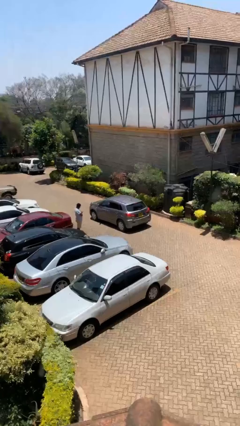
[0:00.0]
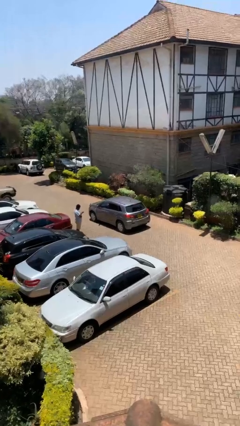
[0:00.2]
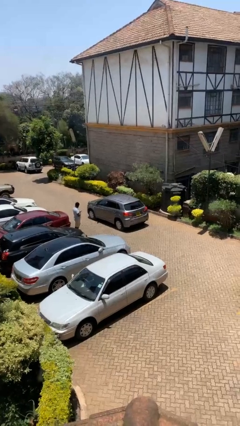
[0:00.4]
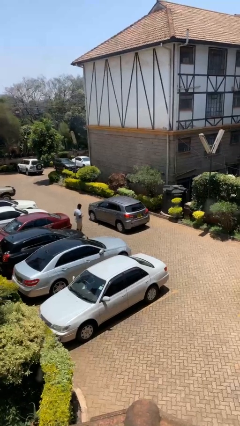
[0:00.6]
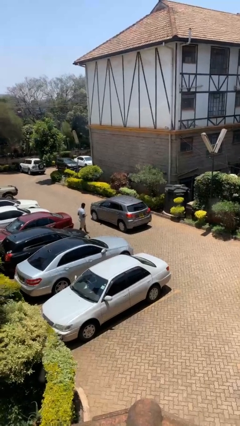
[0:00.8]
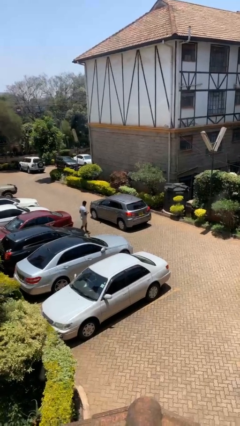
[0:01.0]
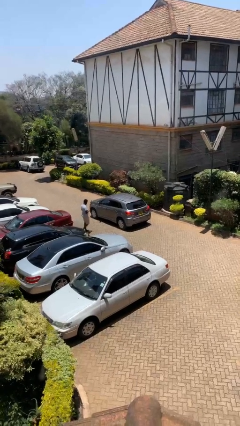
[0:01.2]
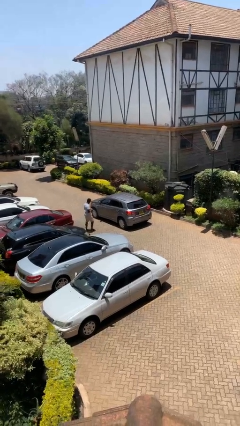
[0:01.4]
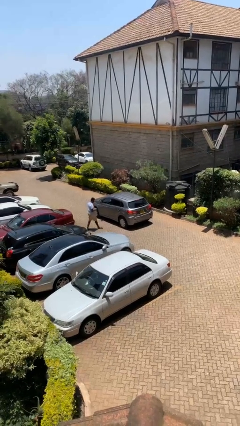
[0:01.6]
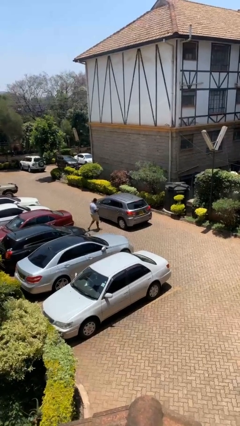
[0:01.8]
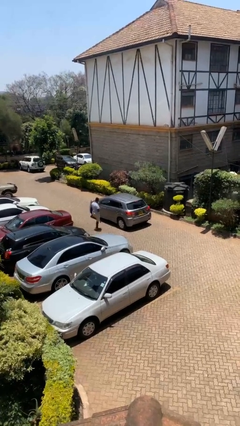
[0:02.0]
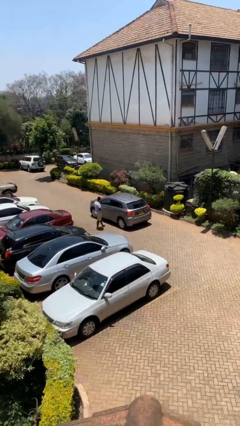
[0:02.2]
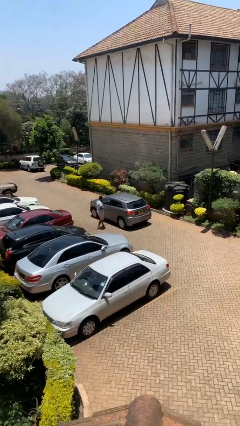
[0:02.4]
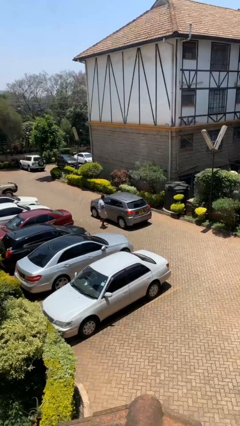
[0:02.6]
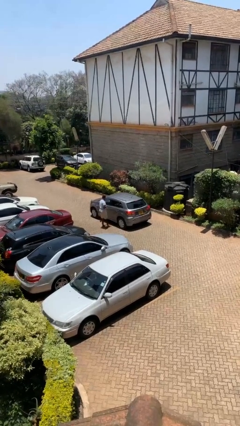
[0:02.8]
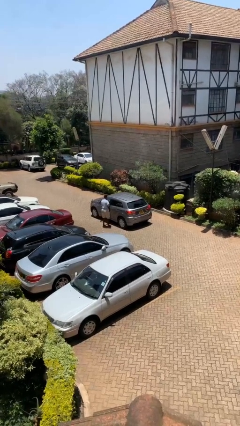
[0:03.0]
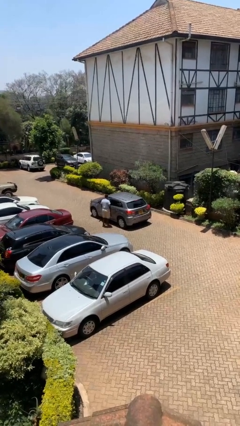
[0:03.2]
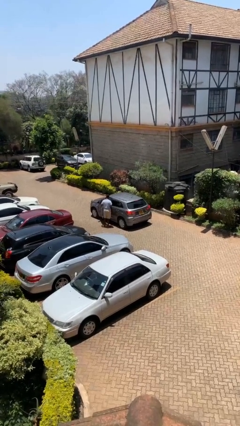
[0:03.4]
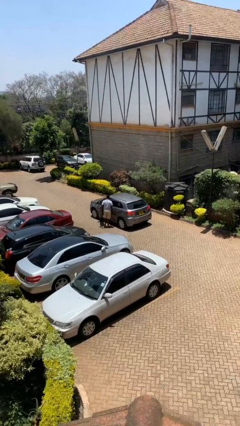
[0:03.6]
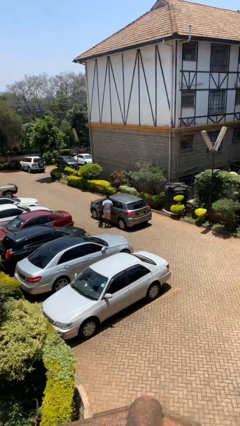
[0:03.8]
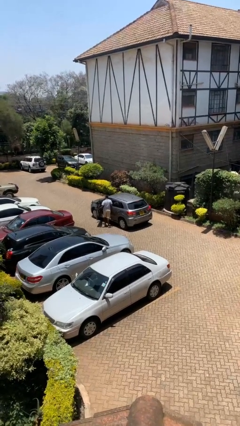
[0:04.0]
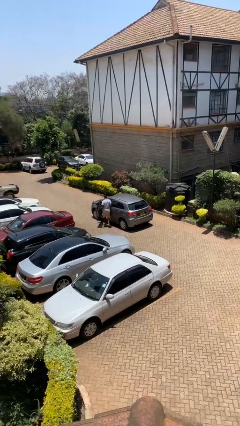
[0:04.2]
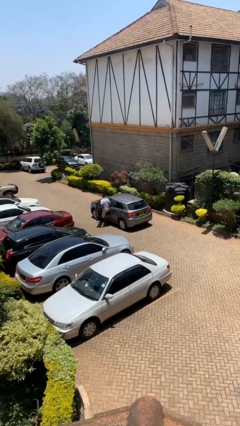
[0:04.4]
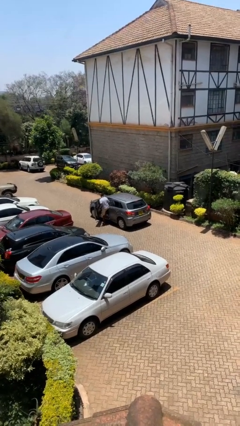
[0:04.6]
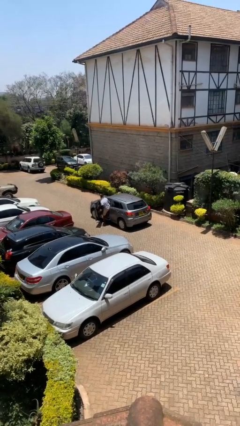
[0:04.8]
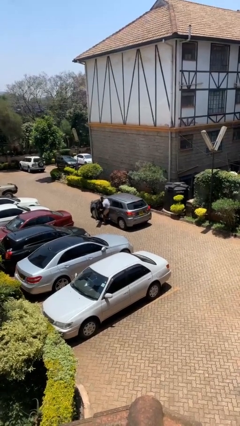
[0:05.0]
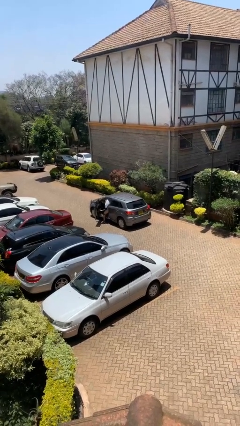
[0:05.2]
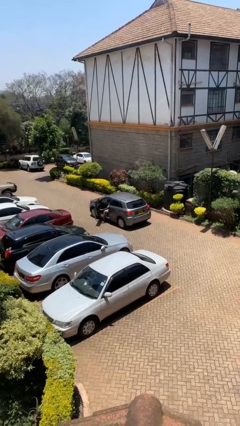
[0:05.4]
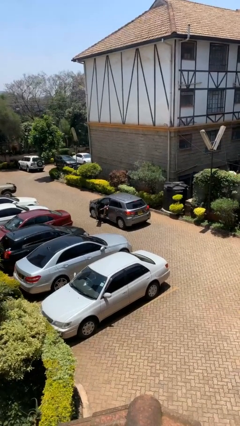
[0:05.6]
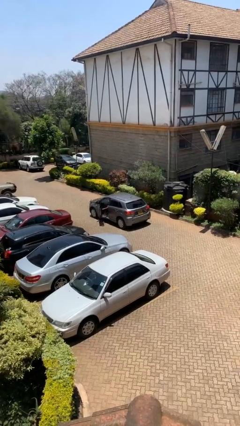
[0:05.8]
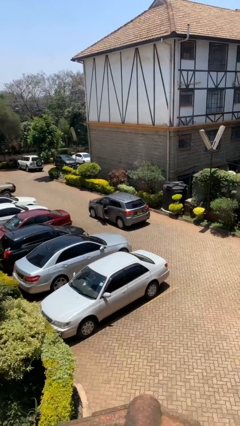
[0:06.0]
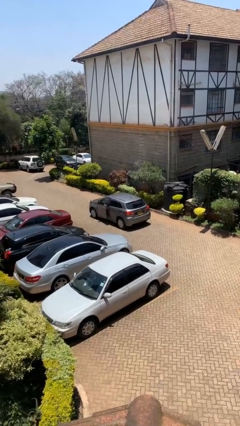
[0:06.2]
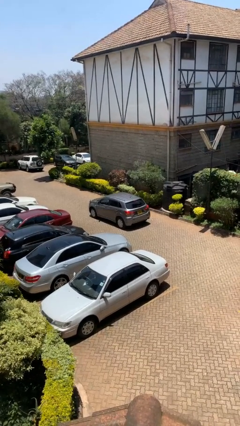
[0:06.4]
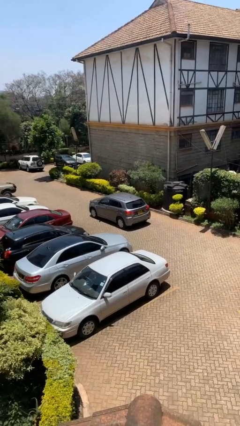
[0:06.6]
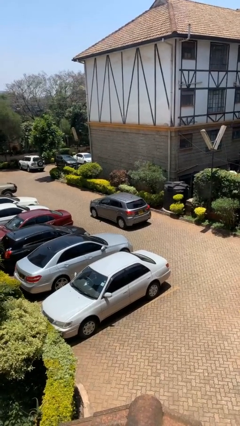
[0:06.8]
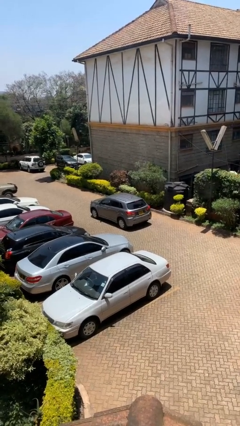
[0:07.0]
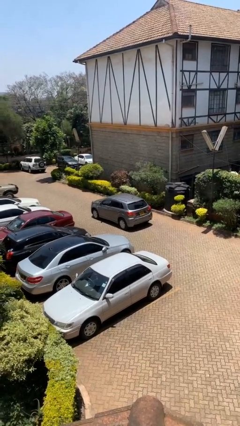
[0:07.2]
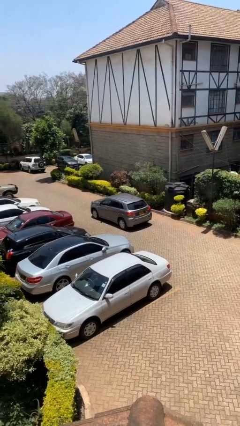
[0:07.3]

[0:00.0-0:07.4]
car picks up person

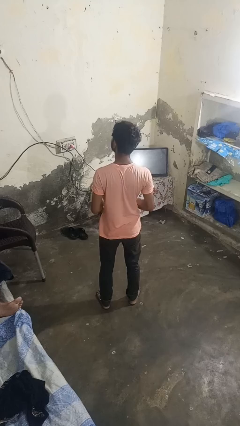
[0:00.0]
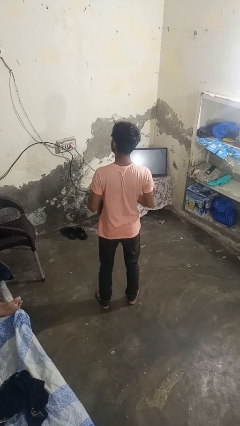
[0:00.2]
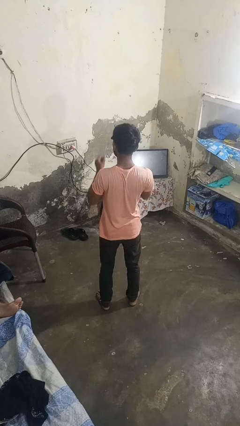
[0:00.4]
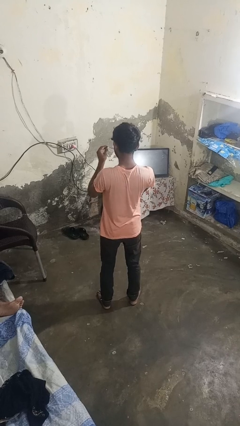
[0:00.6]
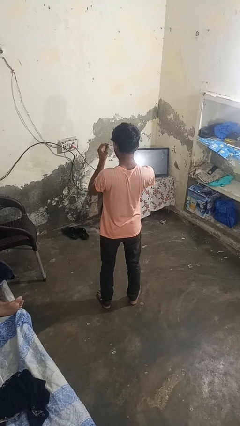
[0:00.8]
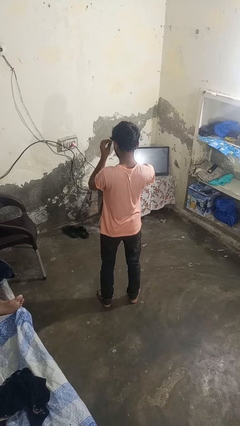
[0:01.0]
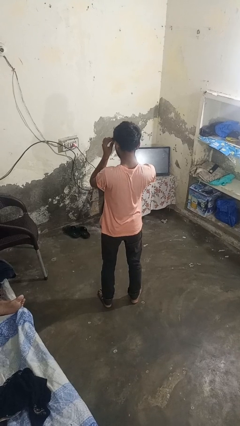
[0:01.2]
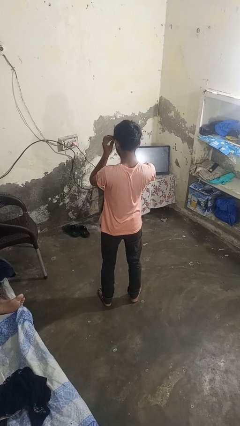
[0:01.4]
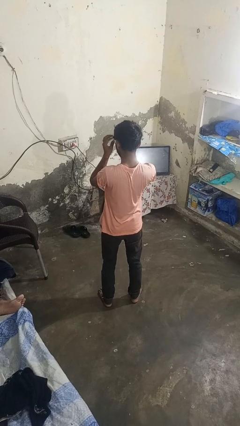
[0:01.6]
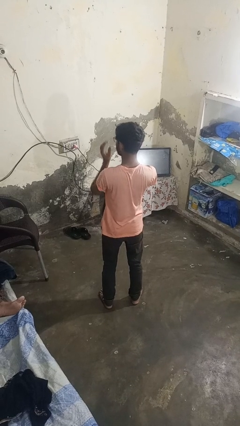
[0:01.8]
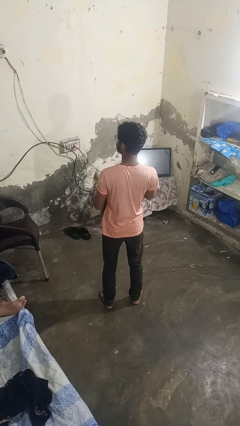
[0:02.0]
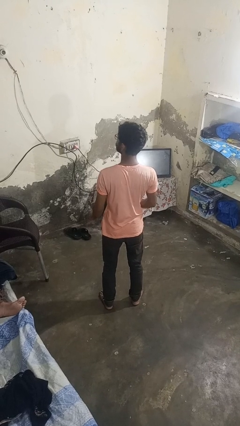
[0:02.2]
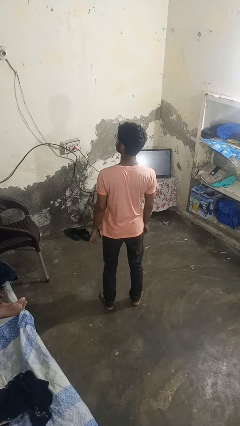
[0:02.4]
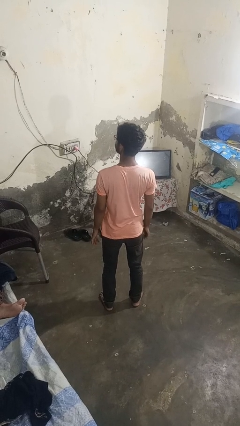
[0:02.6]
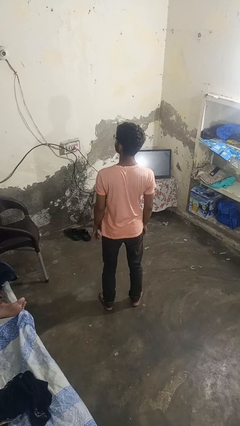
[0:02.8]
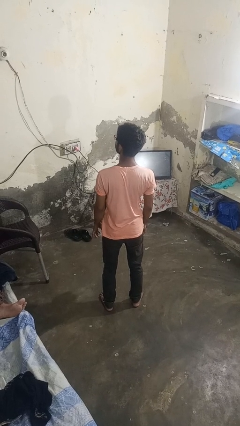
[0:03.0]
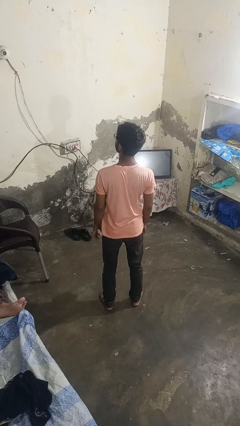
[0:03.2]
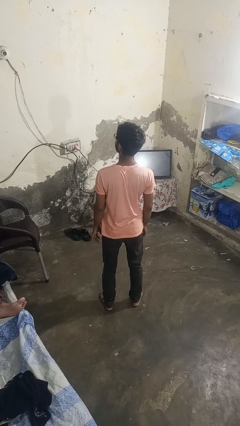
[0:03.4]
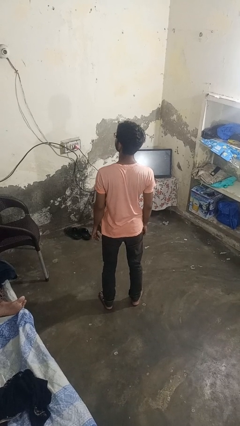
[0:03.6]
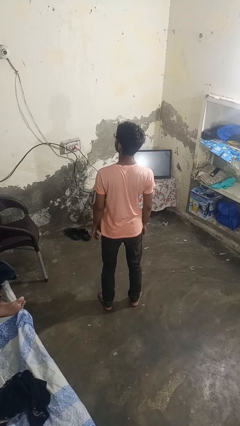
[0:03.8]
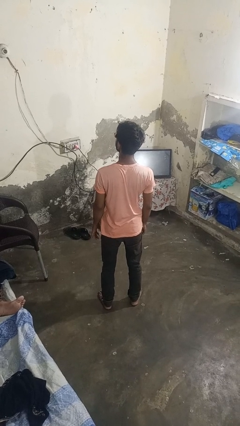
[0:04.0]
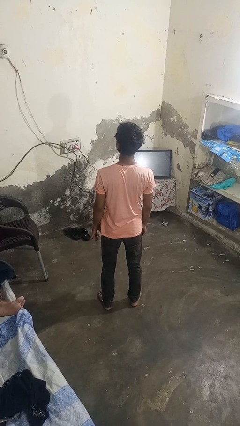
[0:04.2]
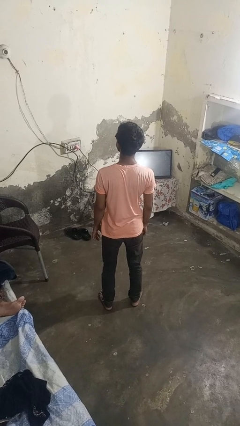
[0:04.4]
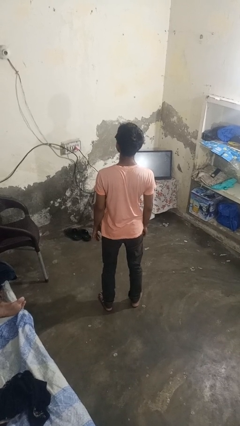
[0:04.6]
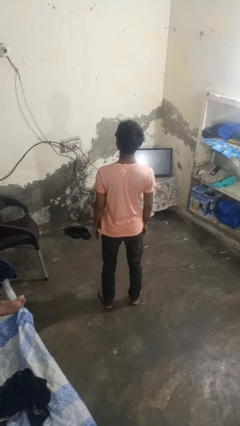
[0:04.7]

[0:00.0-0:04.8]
person puts on glasses

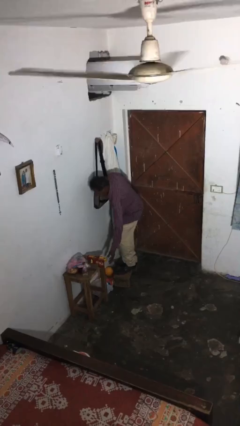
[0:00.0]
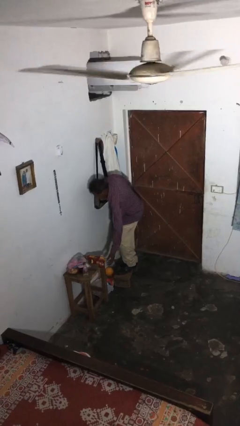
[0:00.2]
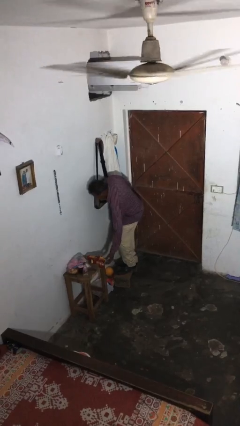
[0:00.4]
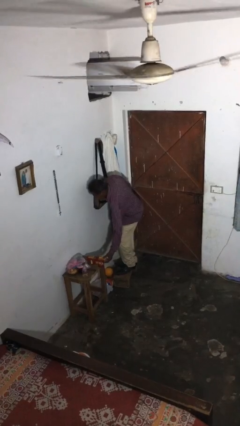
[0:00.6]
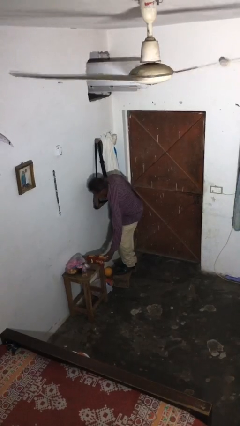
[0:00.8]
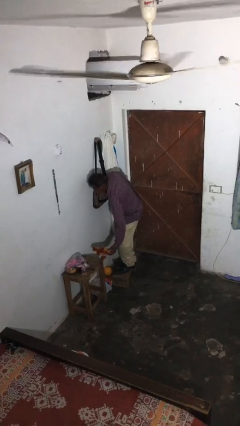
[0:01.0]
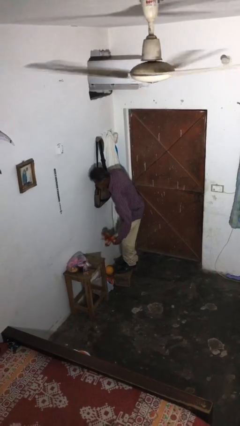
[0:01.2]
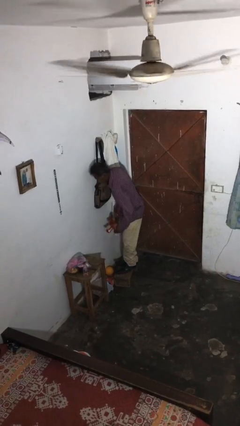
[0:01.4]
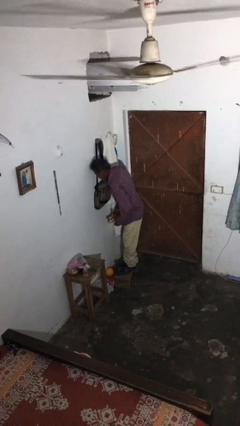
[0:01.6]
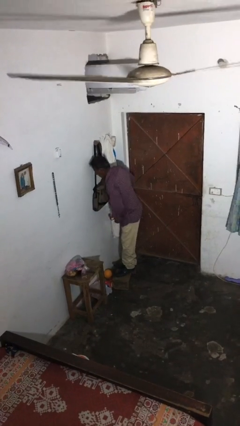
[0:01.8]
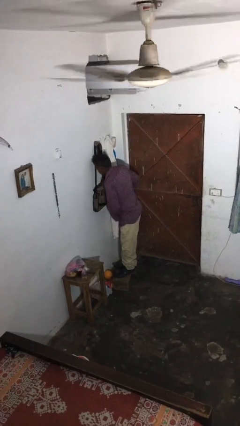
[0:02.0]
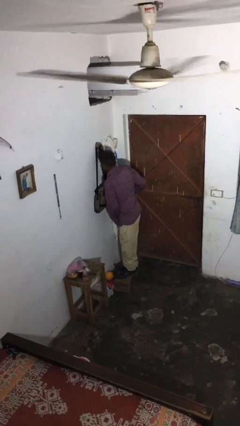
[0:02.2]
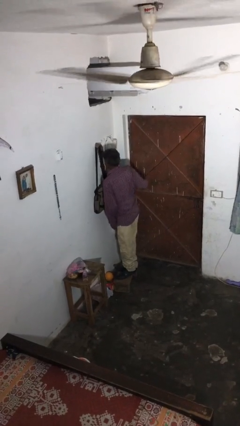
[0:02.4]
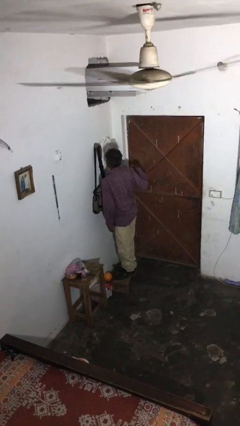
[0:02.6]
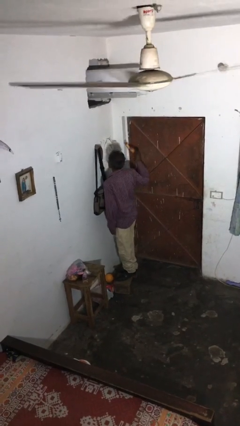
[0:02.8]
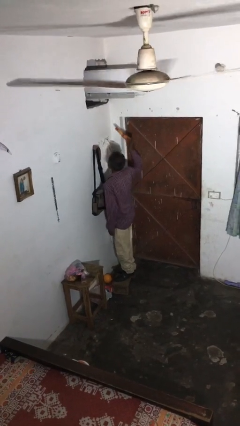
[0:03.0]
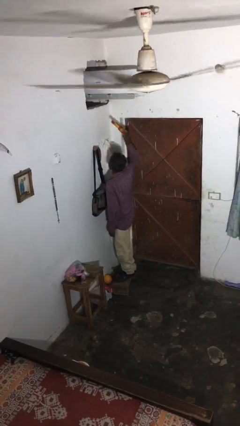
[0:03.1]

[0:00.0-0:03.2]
person picks up object from table

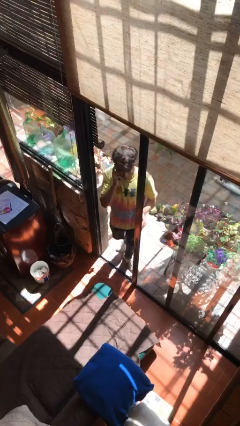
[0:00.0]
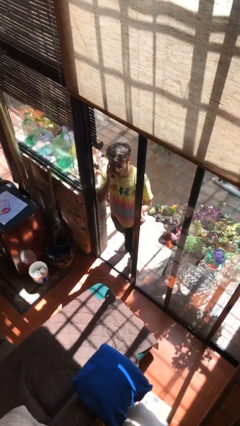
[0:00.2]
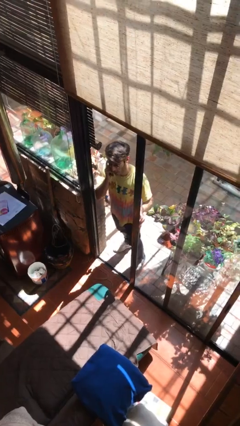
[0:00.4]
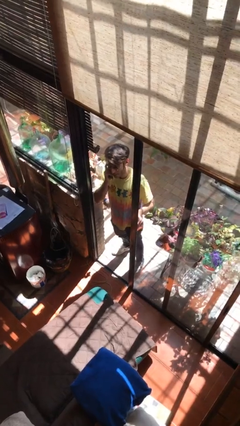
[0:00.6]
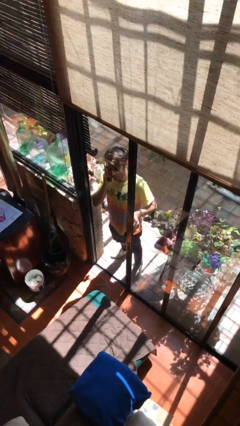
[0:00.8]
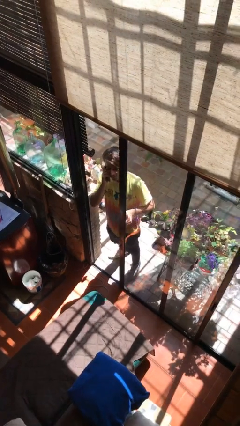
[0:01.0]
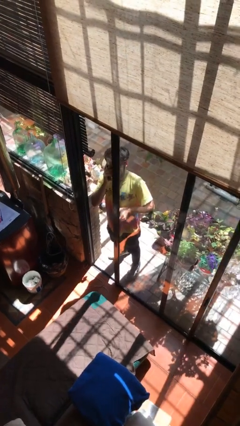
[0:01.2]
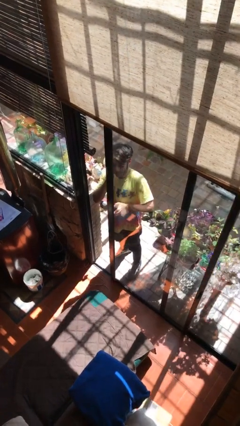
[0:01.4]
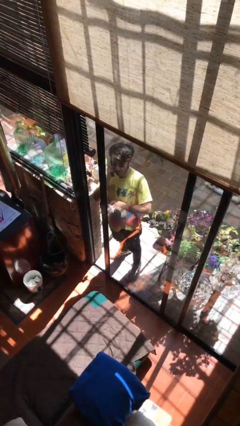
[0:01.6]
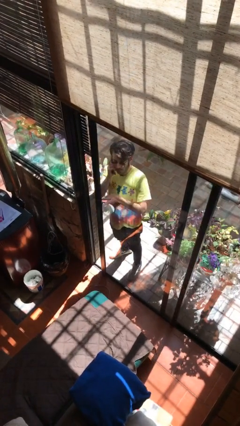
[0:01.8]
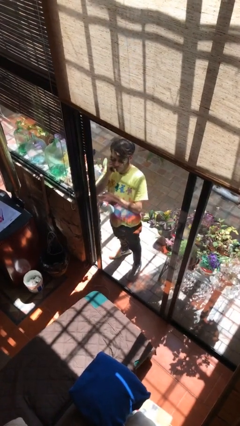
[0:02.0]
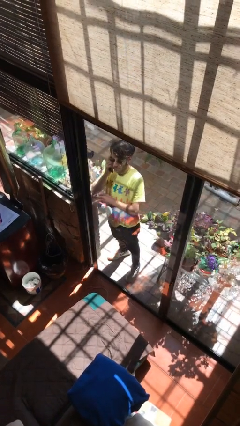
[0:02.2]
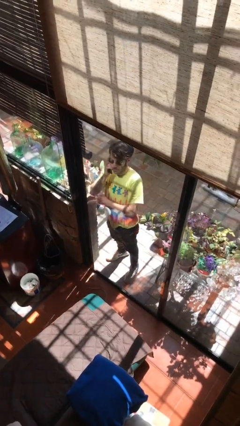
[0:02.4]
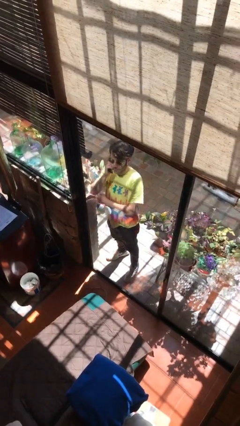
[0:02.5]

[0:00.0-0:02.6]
person closes facility door
